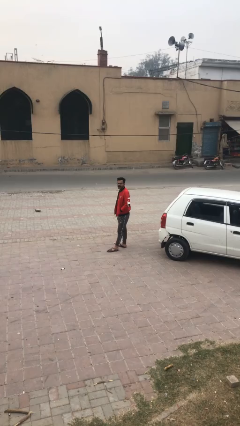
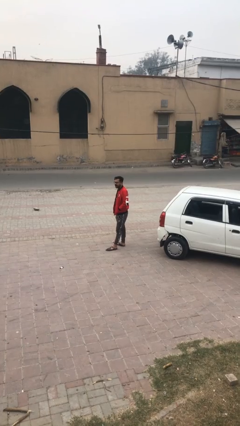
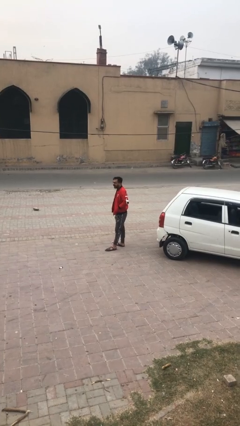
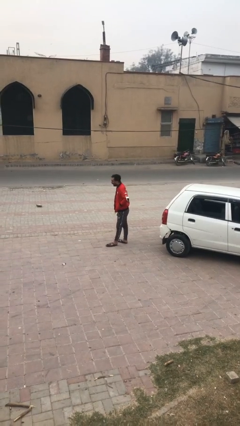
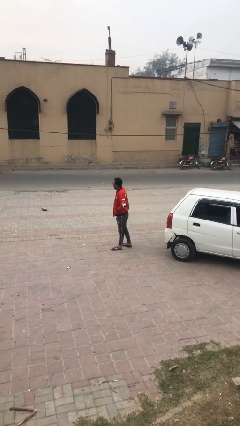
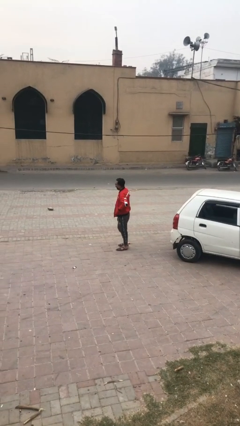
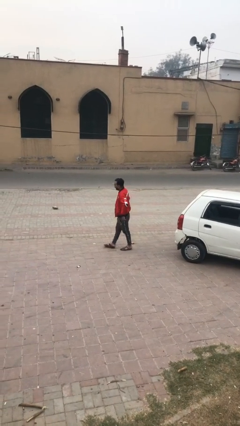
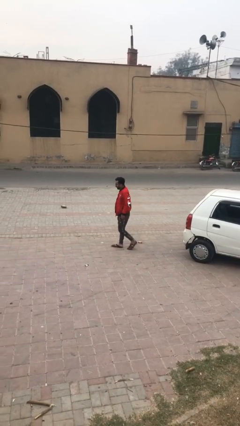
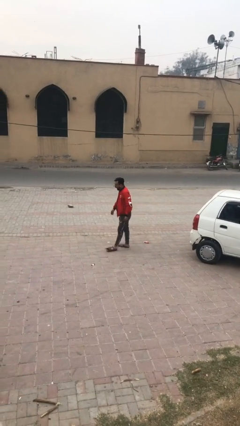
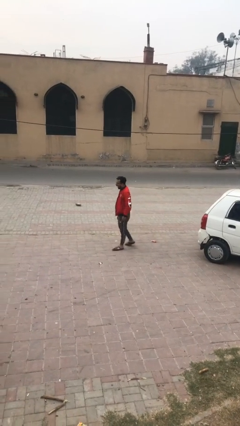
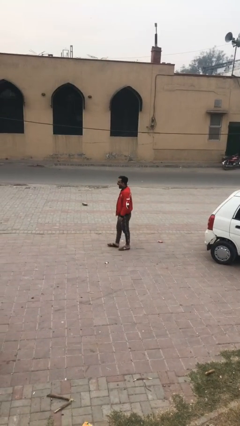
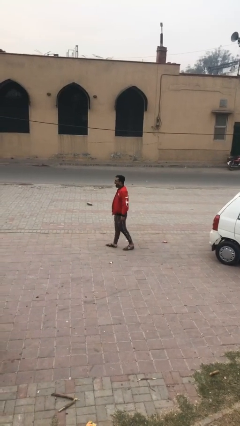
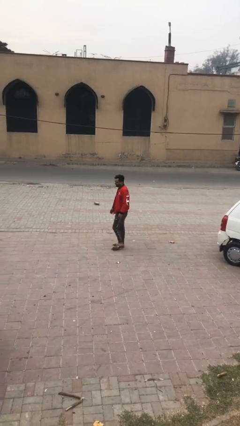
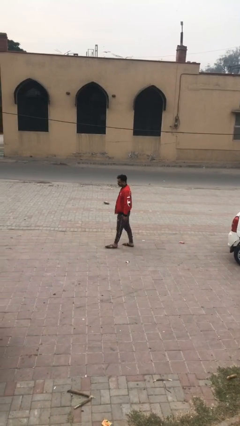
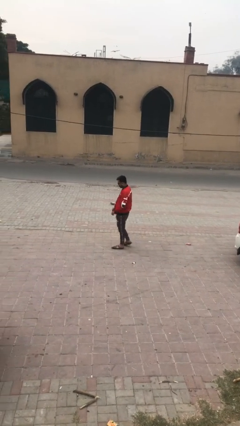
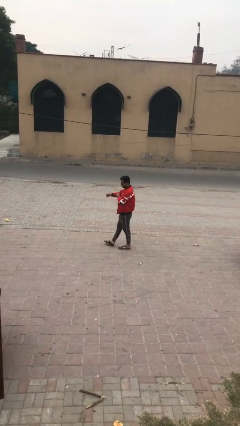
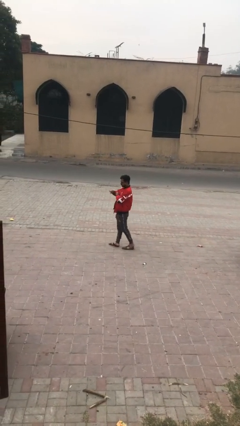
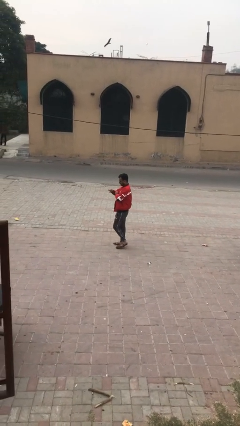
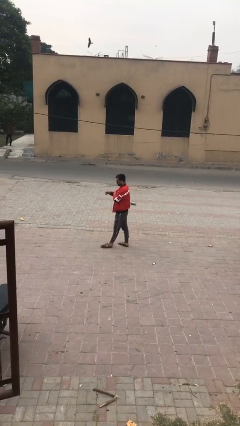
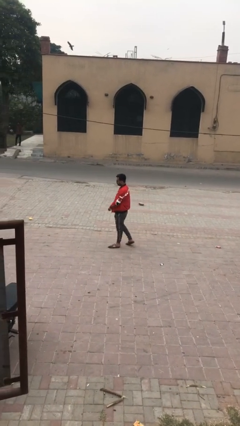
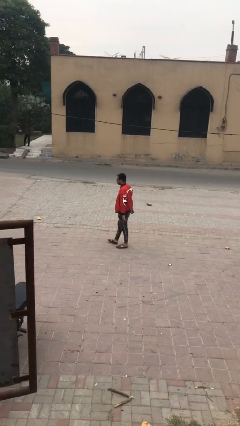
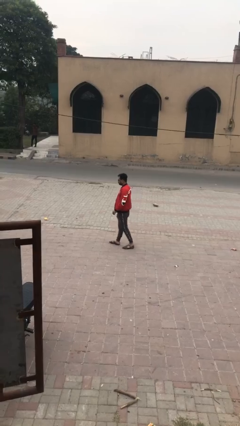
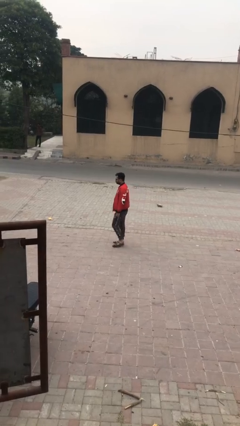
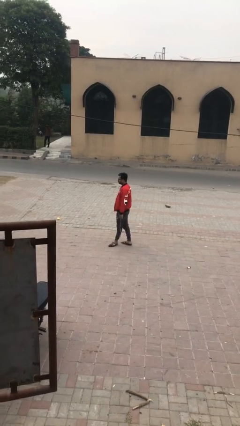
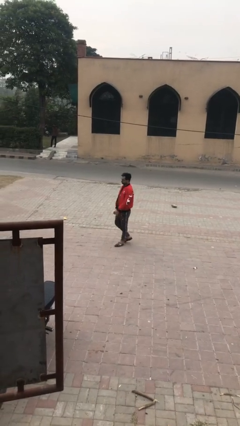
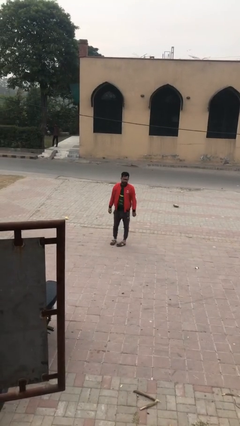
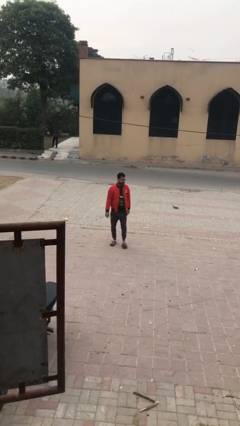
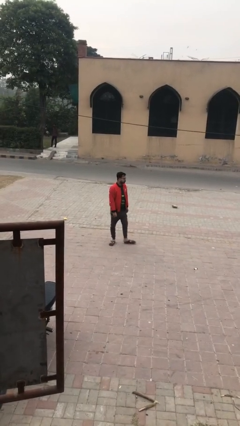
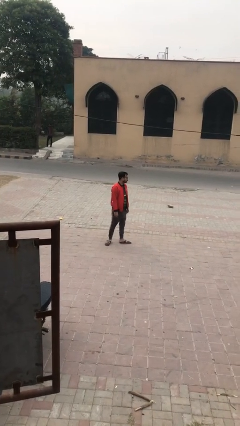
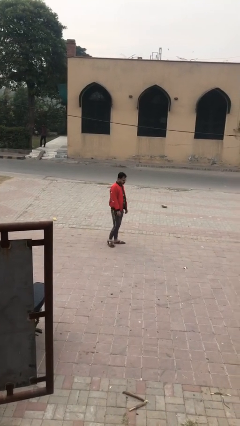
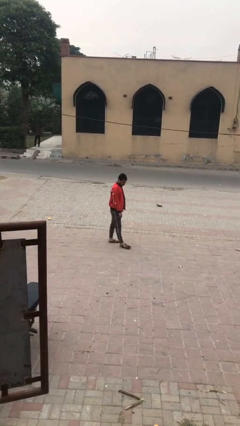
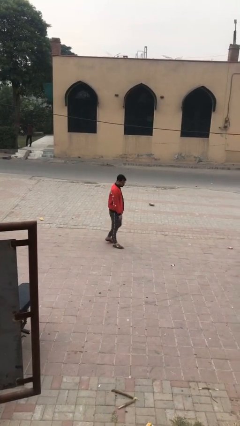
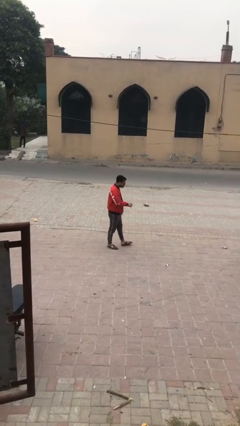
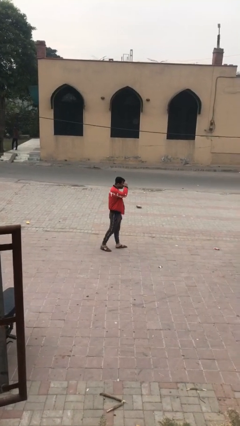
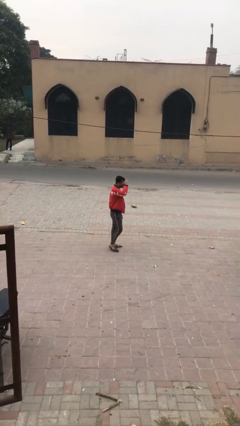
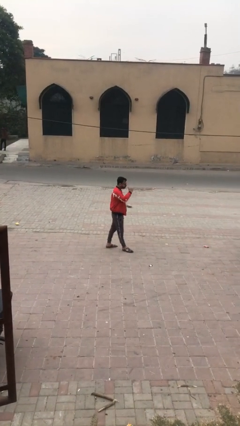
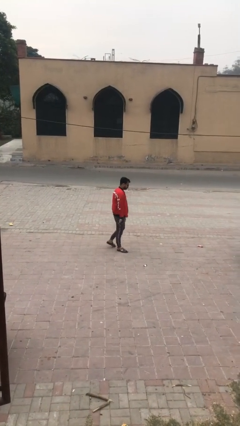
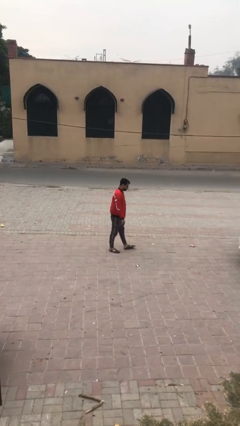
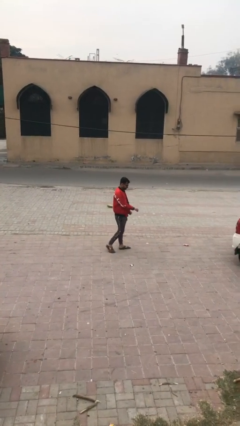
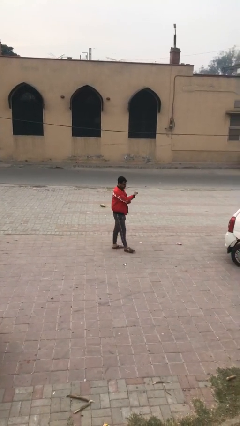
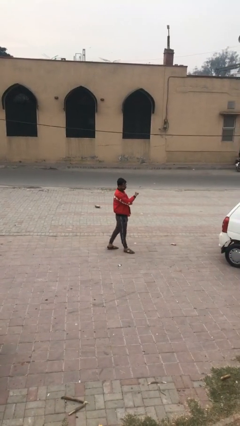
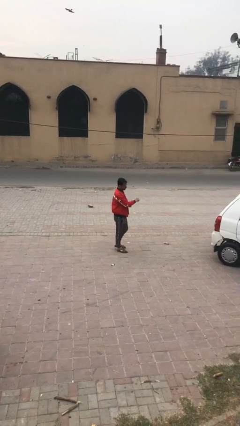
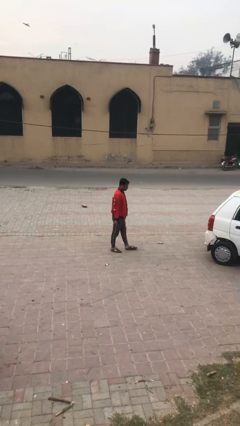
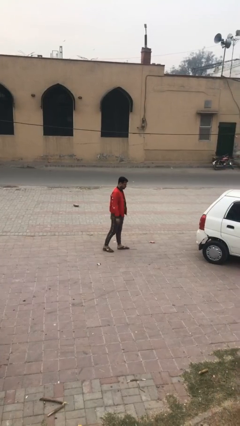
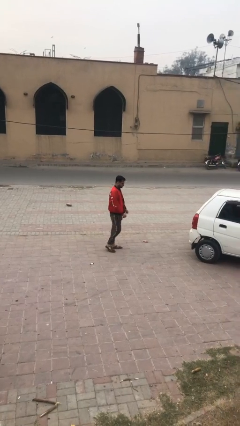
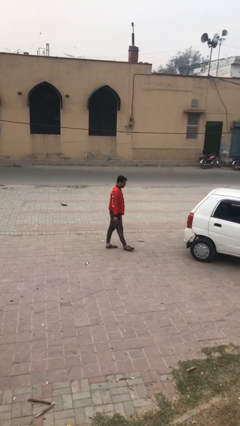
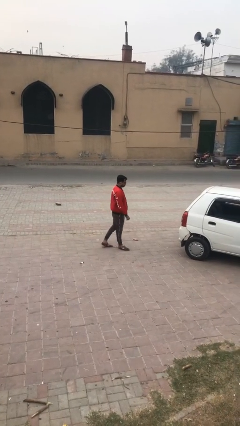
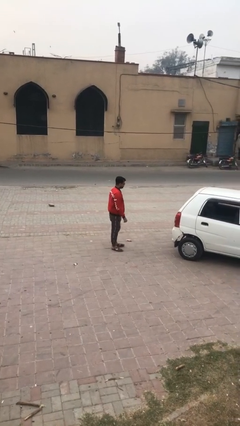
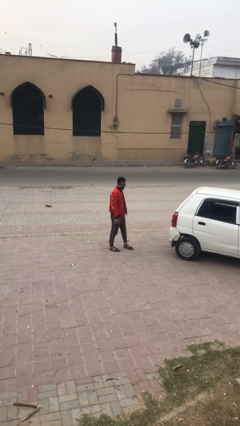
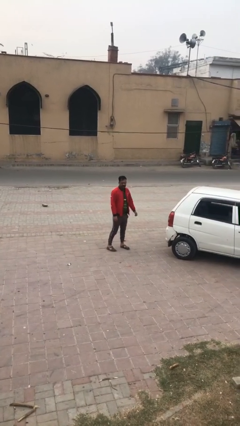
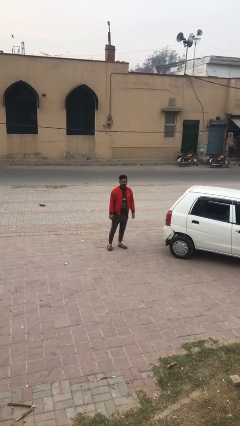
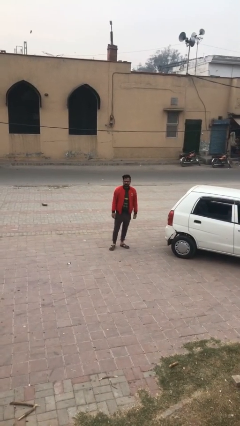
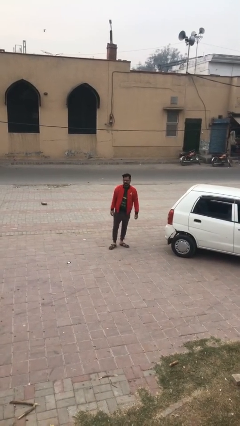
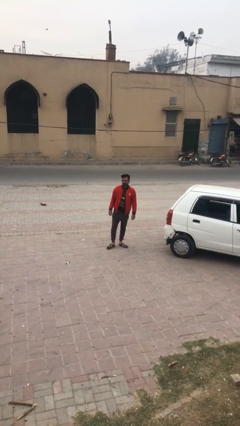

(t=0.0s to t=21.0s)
person walks

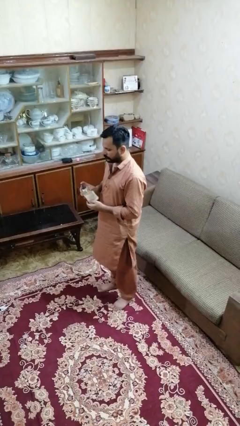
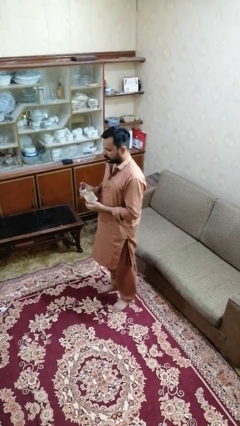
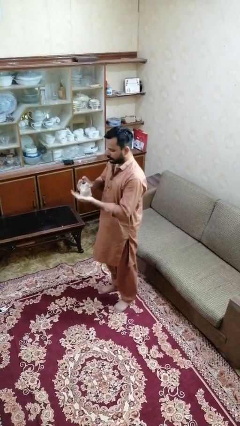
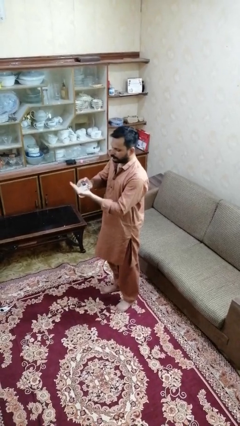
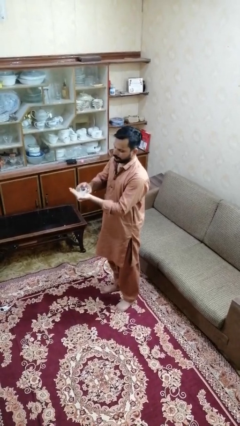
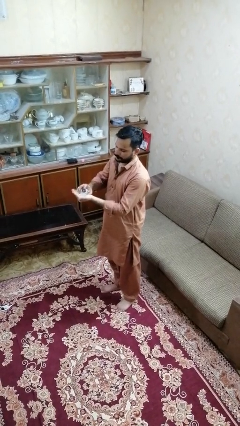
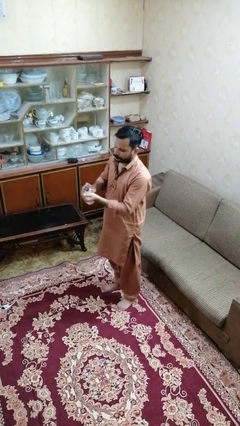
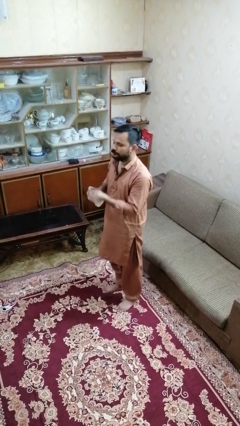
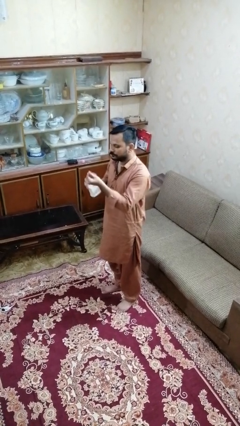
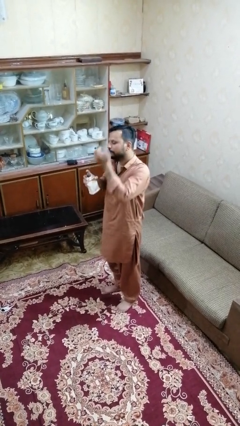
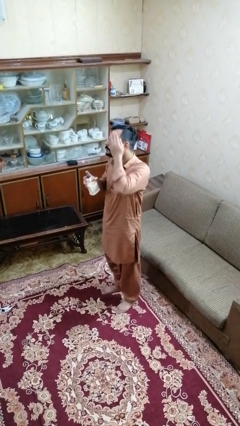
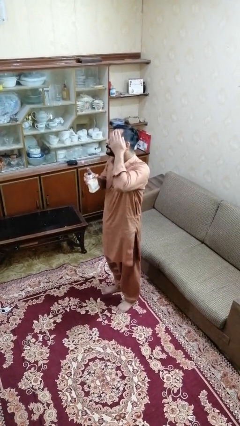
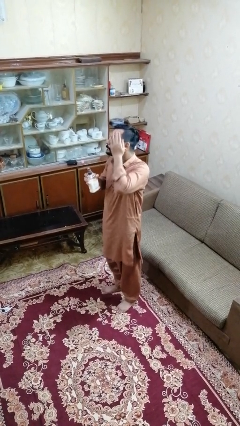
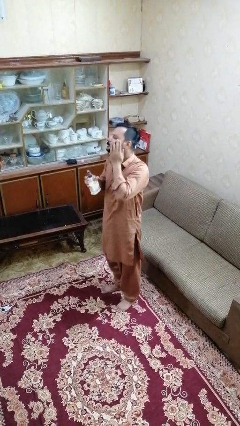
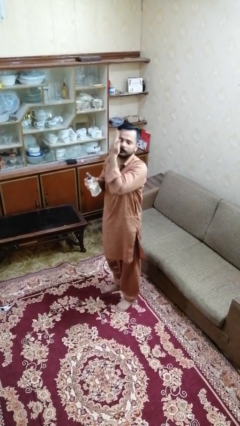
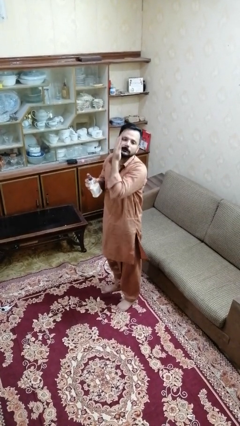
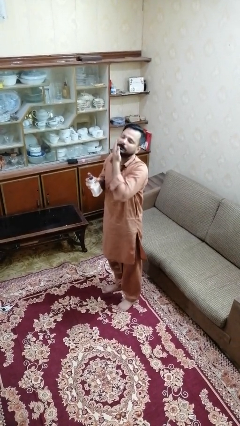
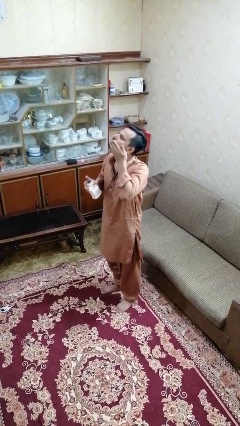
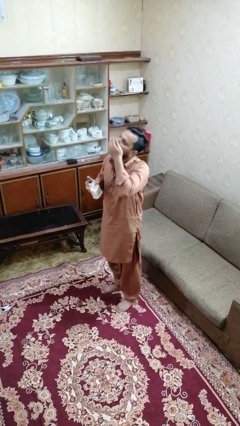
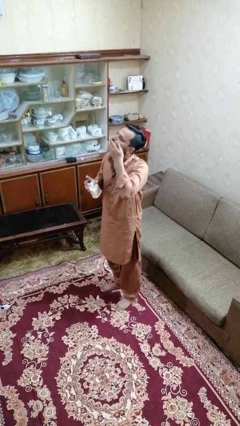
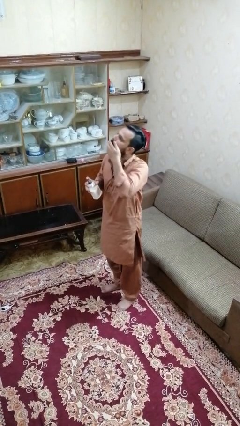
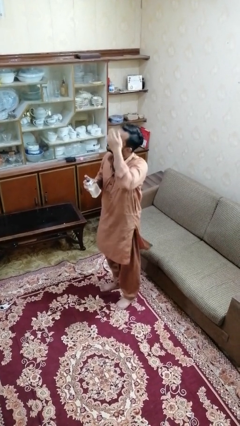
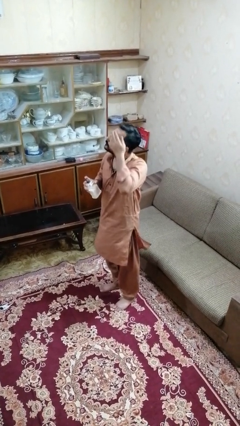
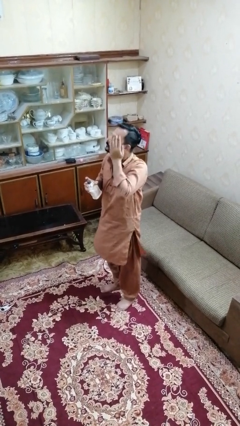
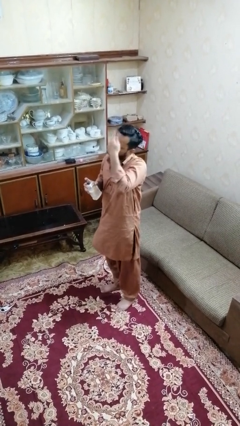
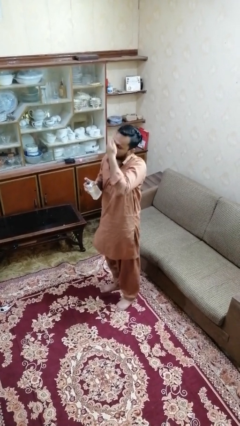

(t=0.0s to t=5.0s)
person applies facial moisturizer

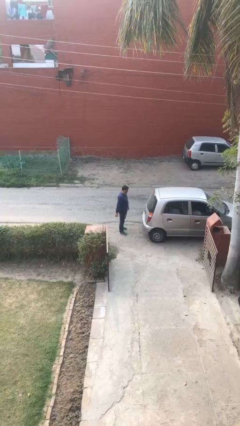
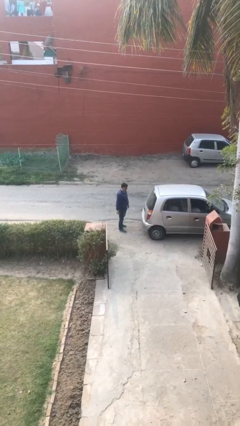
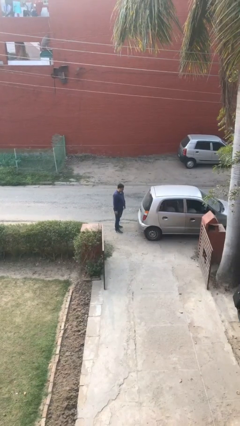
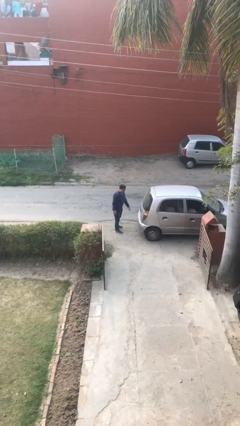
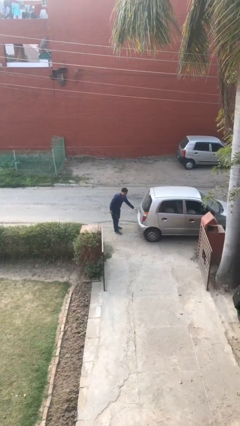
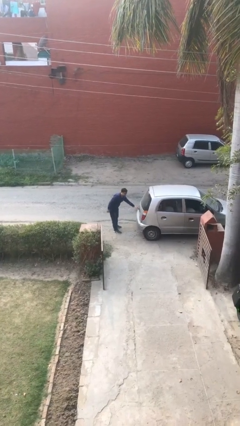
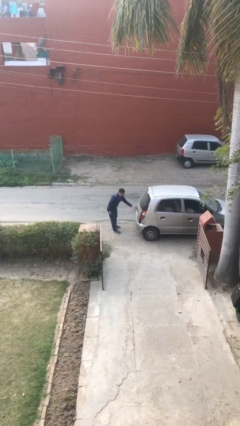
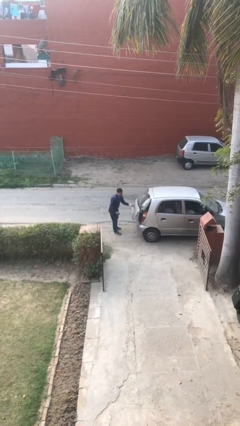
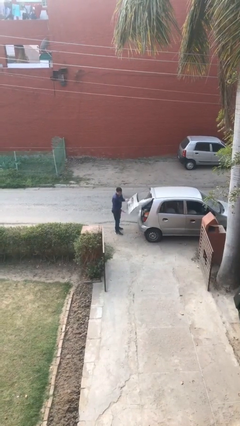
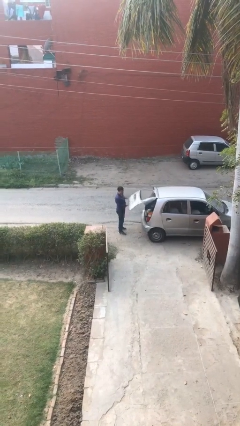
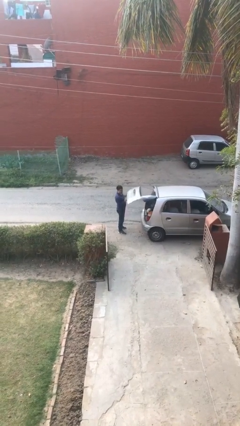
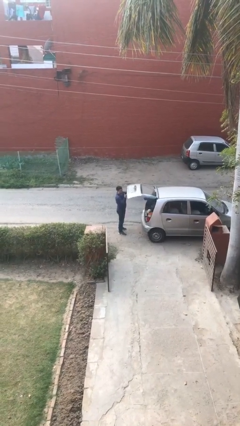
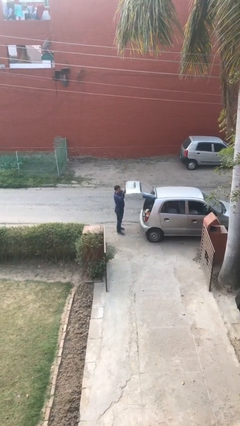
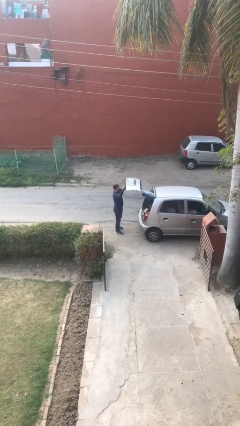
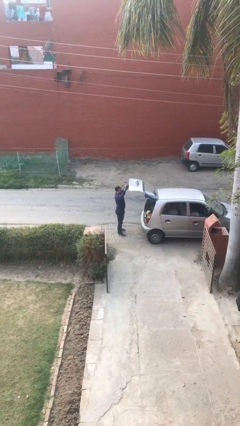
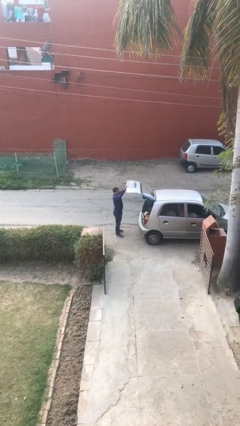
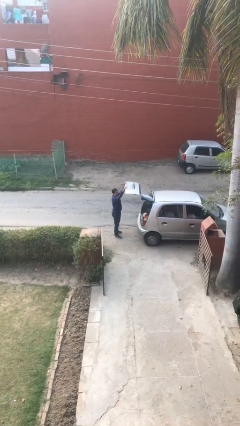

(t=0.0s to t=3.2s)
person opens car trunk
